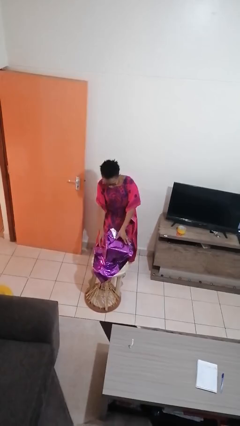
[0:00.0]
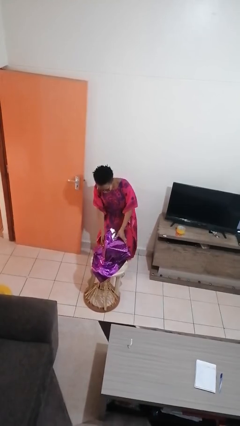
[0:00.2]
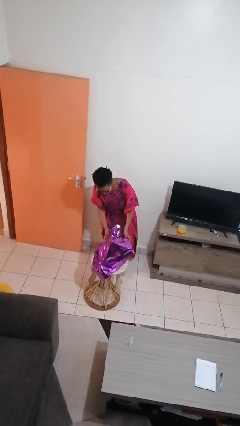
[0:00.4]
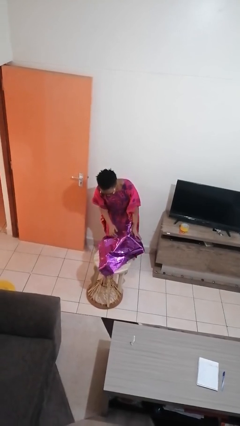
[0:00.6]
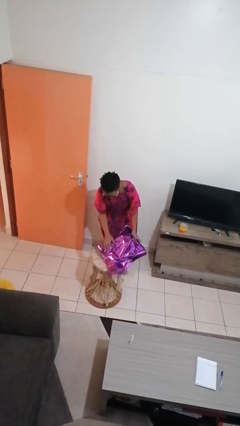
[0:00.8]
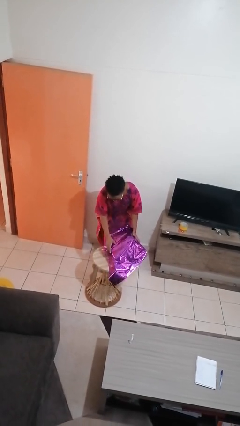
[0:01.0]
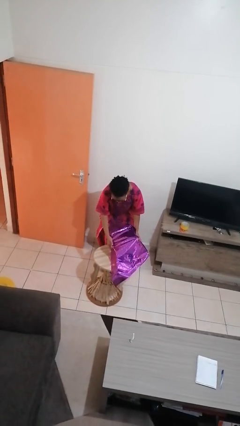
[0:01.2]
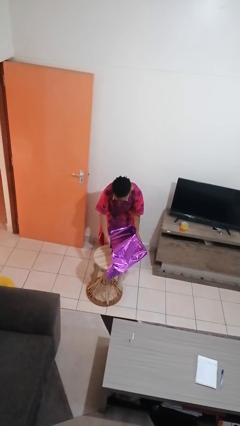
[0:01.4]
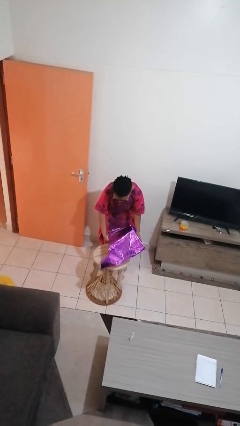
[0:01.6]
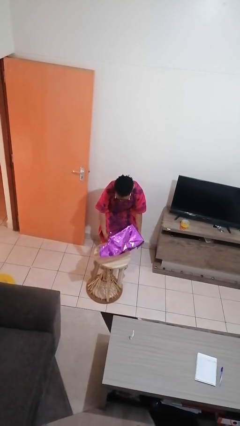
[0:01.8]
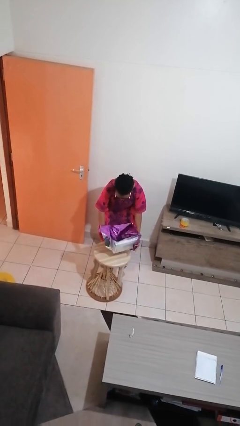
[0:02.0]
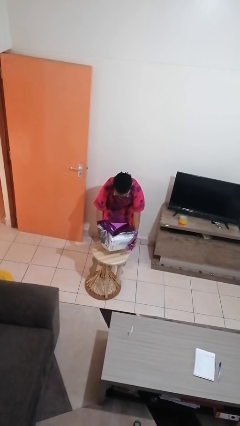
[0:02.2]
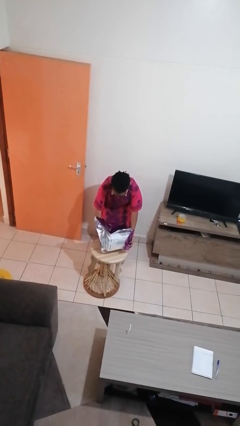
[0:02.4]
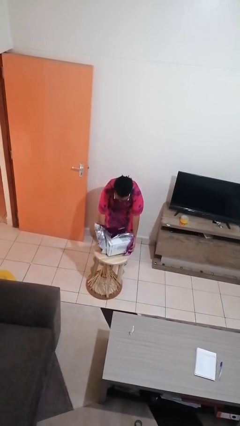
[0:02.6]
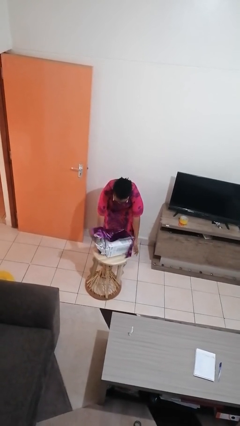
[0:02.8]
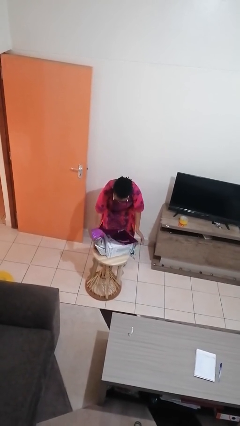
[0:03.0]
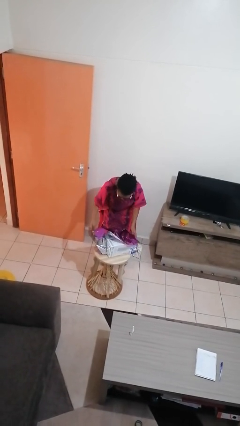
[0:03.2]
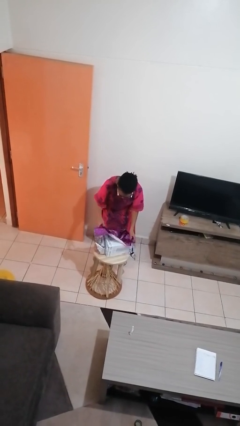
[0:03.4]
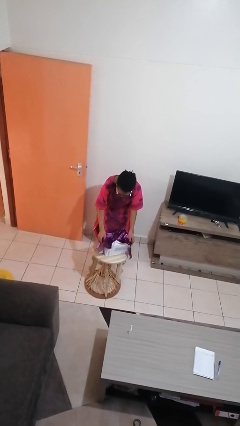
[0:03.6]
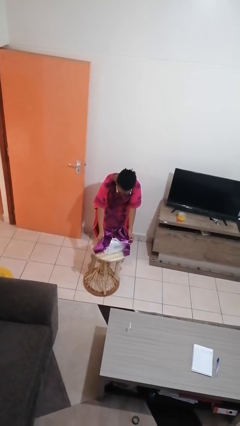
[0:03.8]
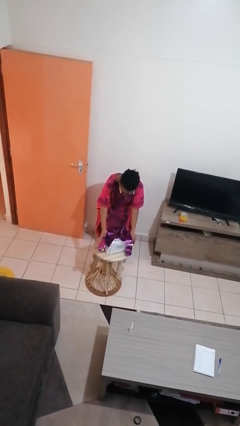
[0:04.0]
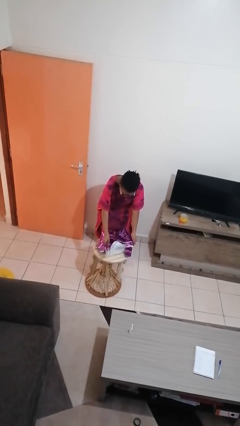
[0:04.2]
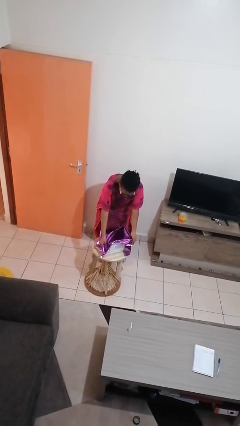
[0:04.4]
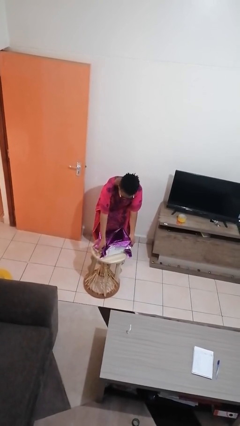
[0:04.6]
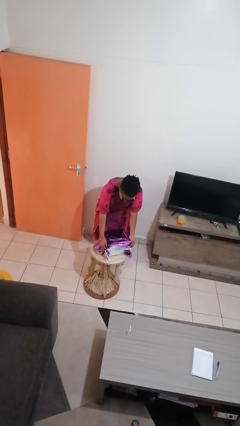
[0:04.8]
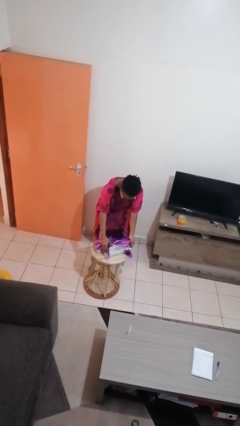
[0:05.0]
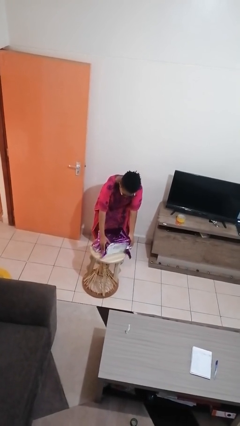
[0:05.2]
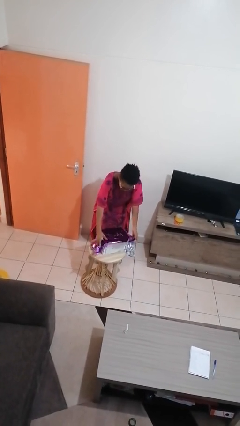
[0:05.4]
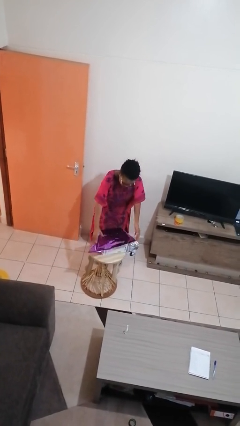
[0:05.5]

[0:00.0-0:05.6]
person wraps box

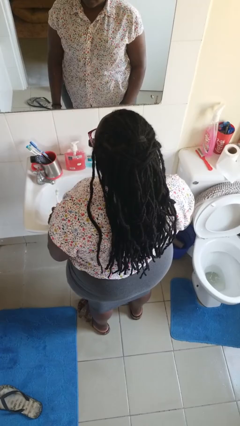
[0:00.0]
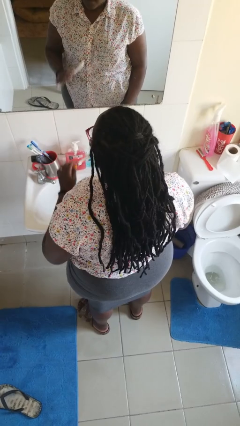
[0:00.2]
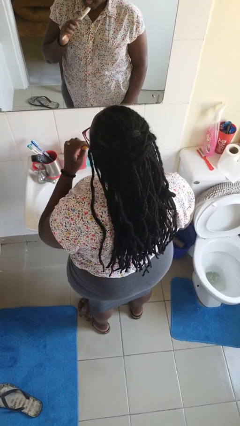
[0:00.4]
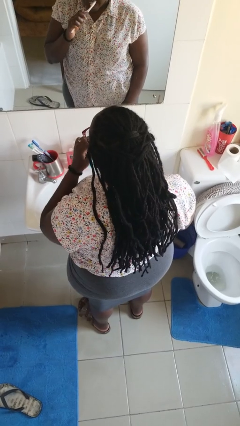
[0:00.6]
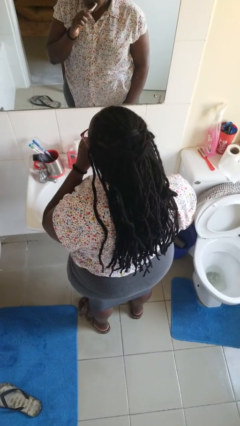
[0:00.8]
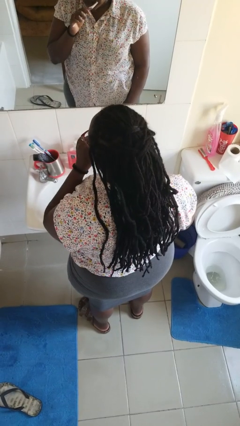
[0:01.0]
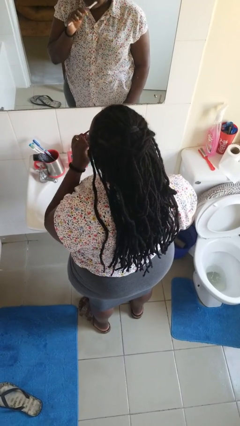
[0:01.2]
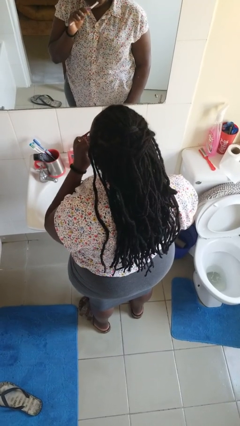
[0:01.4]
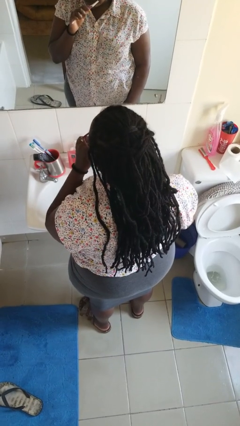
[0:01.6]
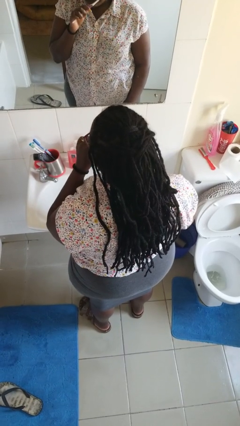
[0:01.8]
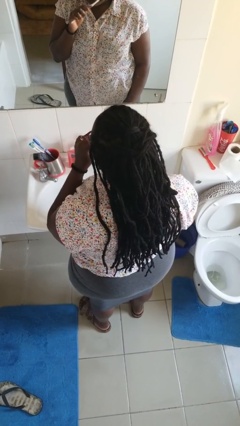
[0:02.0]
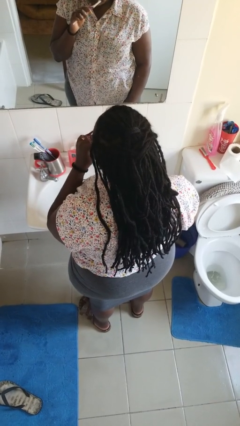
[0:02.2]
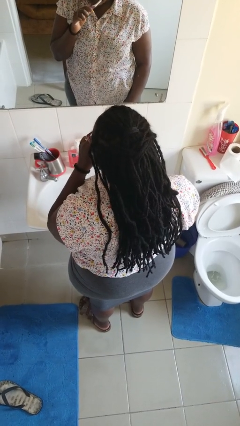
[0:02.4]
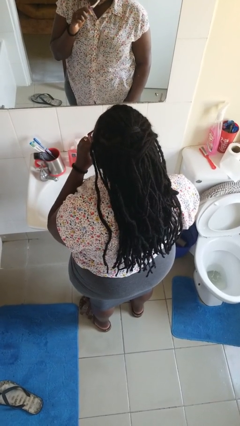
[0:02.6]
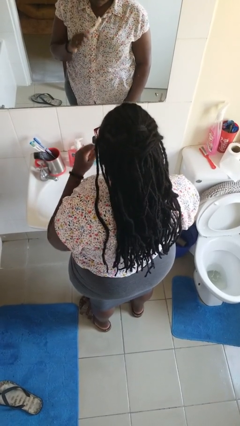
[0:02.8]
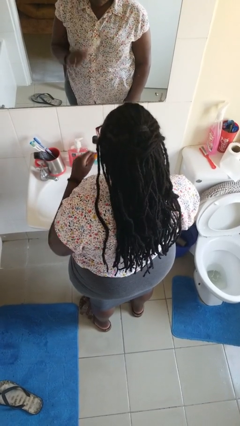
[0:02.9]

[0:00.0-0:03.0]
person brushes teeth

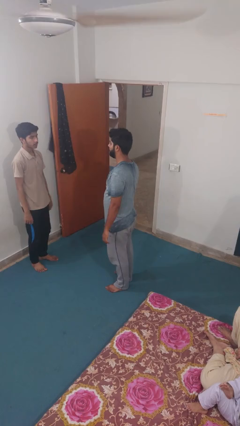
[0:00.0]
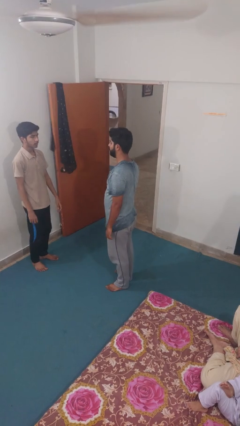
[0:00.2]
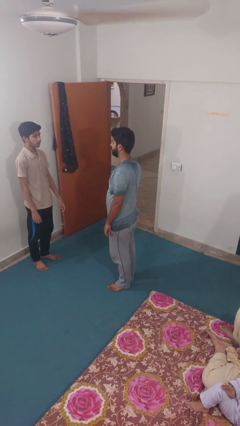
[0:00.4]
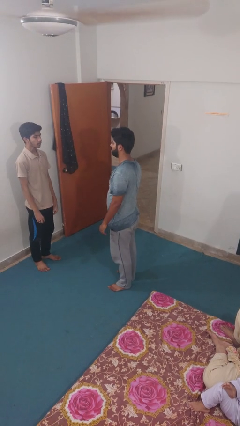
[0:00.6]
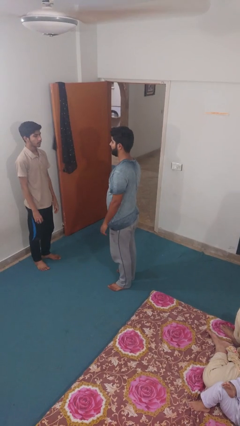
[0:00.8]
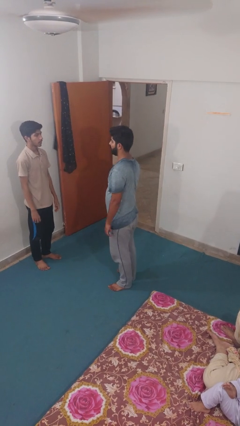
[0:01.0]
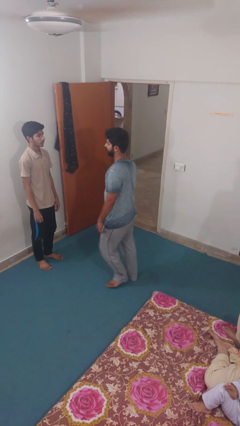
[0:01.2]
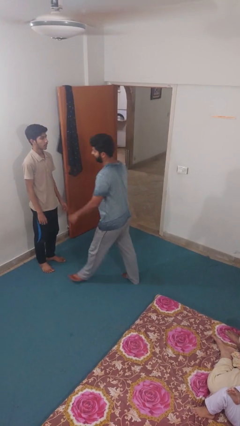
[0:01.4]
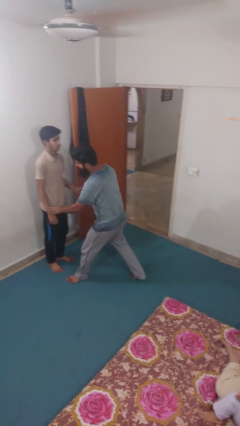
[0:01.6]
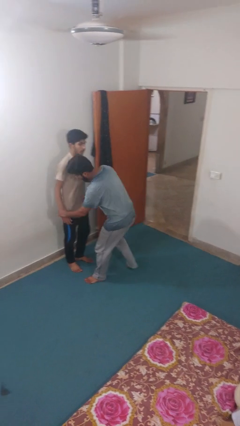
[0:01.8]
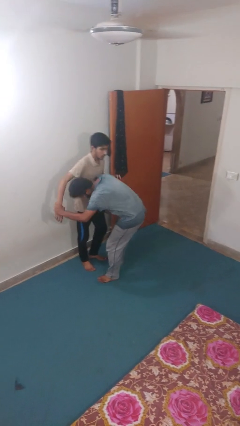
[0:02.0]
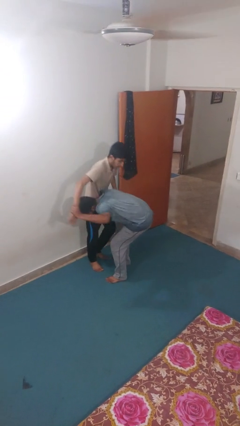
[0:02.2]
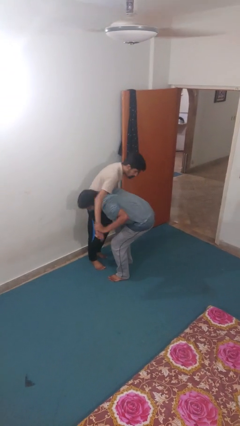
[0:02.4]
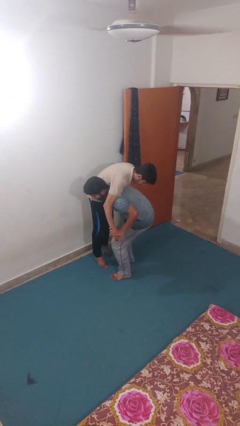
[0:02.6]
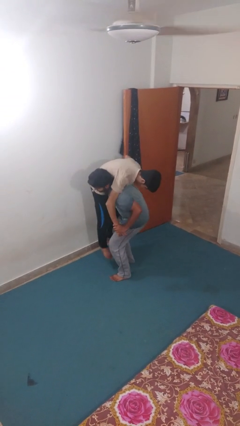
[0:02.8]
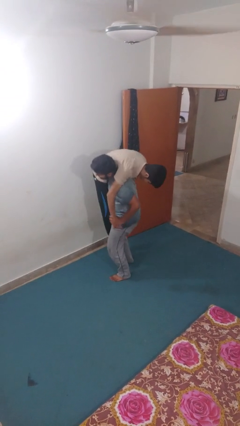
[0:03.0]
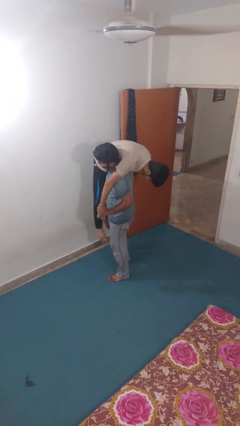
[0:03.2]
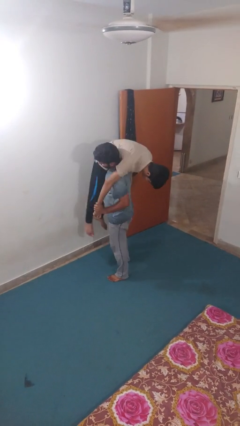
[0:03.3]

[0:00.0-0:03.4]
person carries person over shoulder

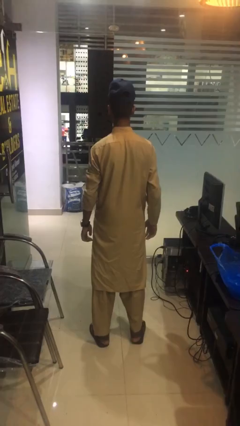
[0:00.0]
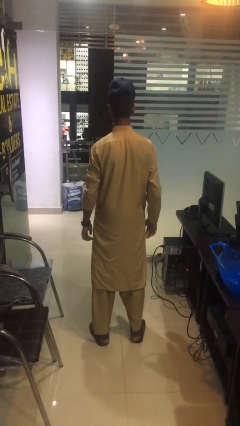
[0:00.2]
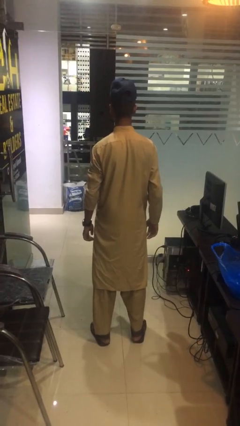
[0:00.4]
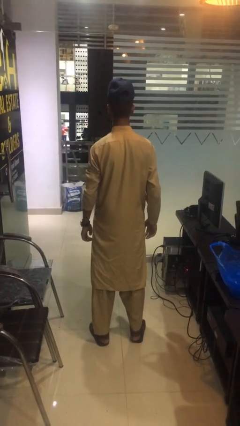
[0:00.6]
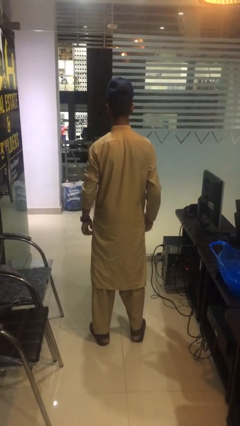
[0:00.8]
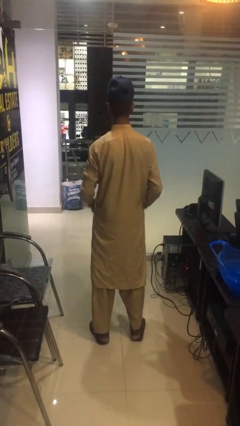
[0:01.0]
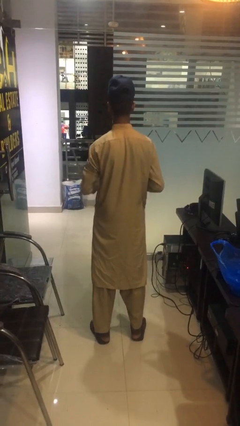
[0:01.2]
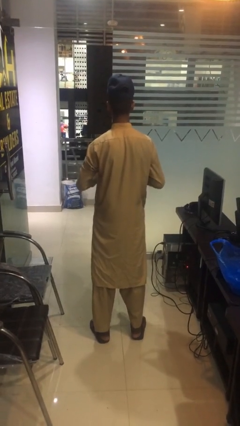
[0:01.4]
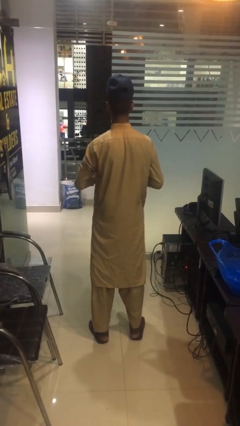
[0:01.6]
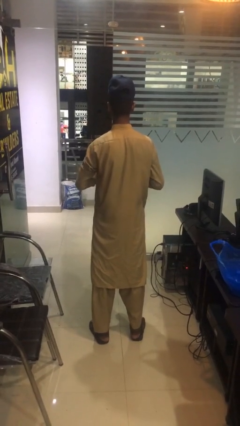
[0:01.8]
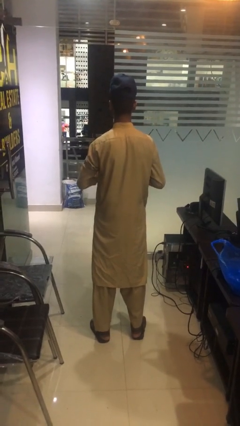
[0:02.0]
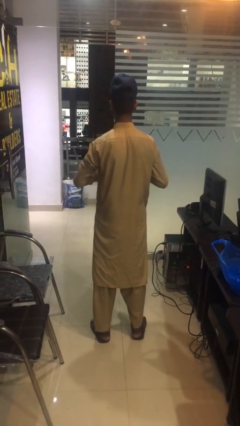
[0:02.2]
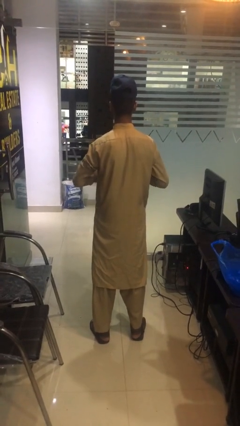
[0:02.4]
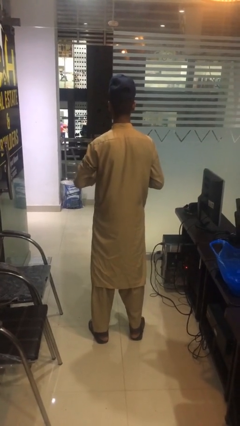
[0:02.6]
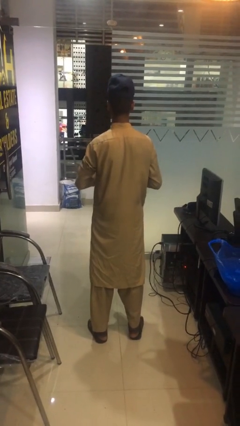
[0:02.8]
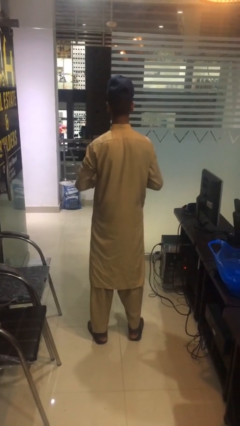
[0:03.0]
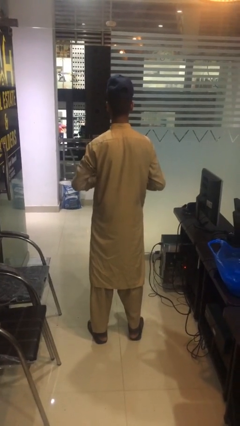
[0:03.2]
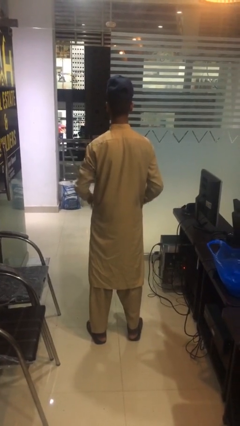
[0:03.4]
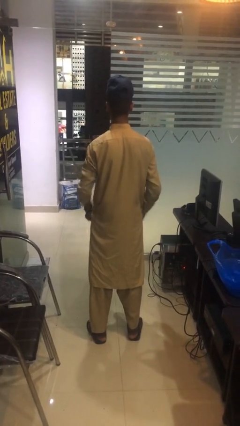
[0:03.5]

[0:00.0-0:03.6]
person cracks knuckles

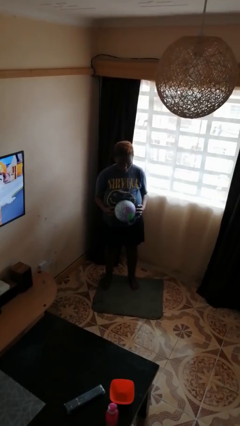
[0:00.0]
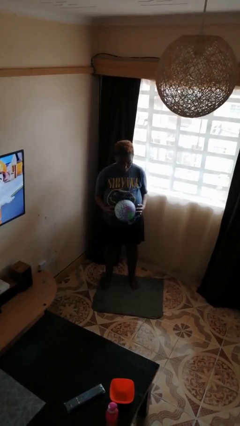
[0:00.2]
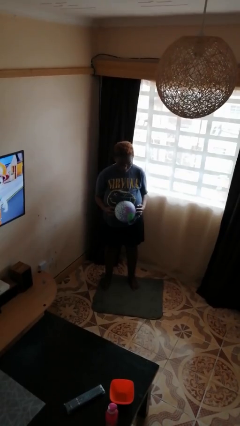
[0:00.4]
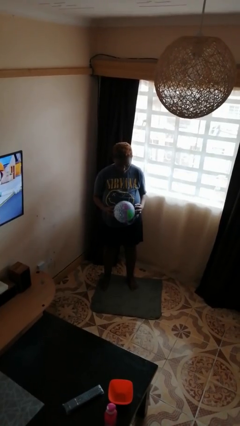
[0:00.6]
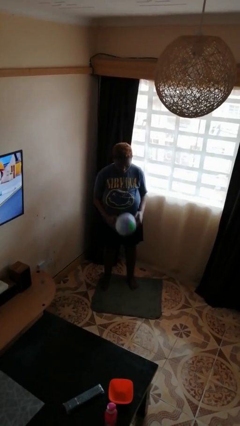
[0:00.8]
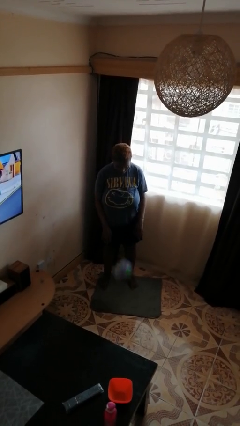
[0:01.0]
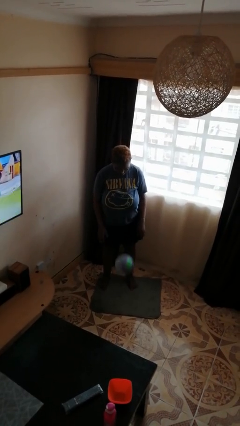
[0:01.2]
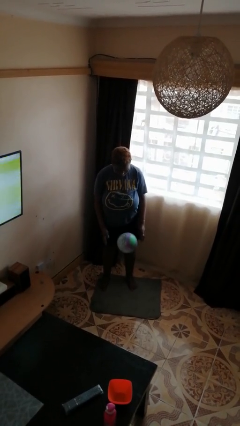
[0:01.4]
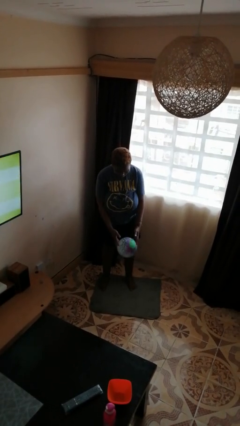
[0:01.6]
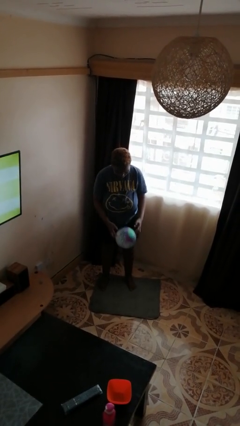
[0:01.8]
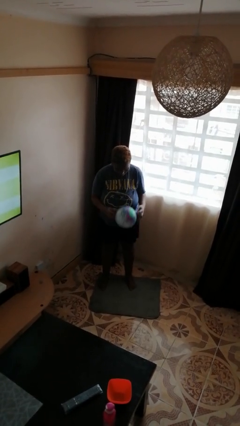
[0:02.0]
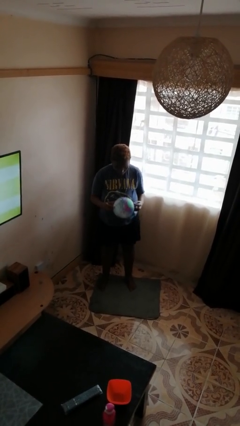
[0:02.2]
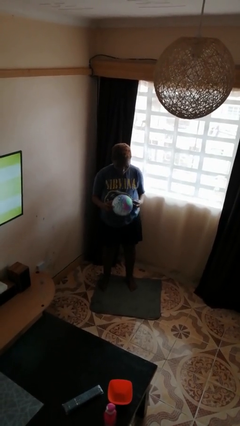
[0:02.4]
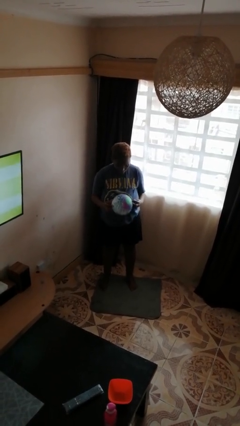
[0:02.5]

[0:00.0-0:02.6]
person bounces ball on floor
